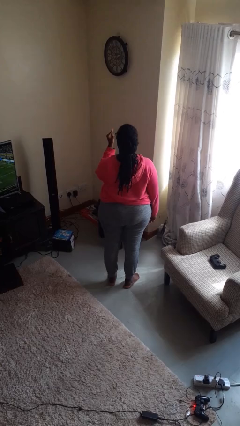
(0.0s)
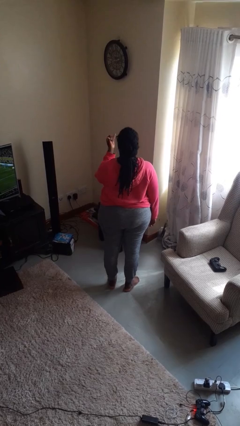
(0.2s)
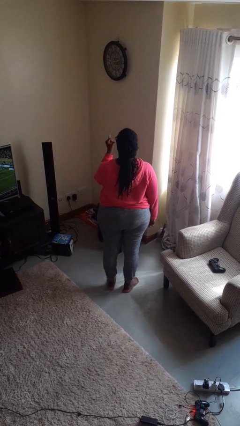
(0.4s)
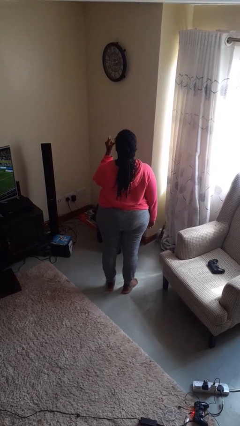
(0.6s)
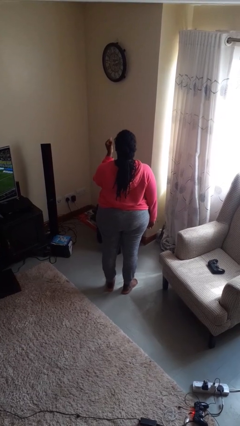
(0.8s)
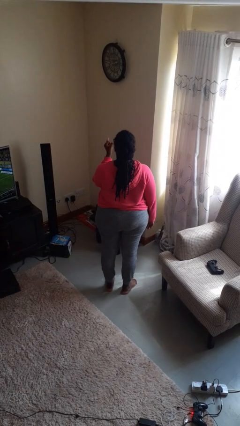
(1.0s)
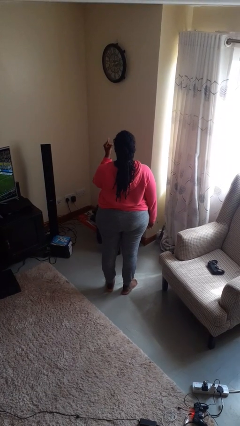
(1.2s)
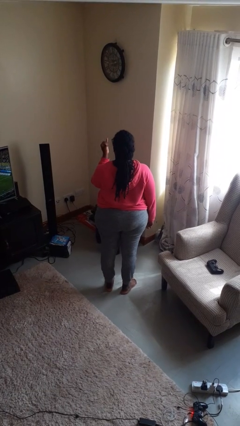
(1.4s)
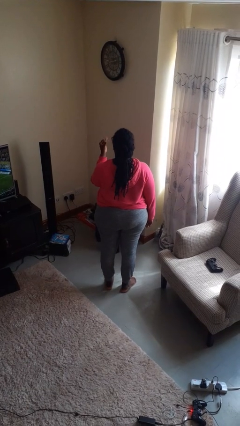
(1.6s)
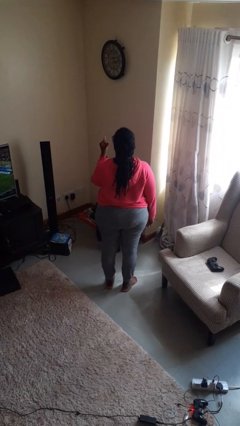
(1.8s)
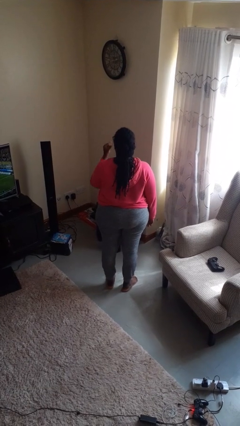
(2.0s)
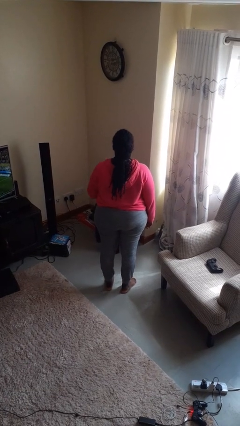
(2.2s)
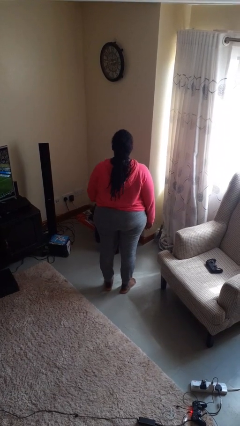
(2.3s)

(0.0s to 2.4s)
person gestures hang loose

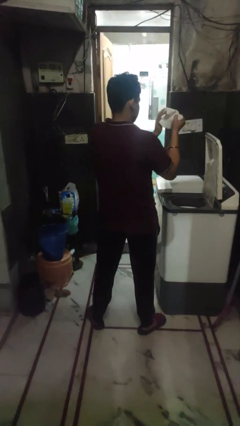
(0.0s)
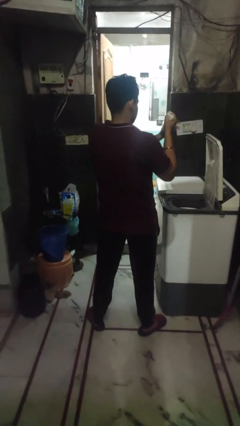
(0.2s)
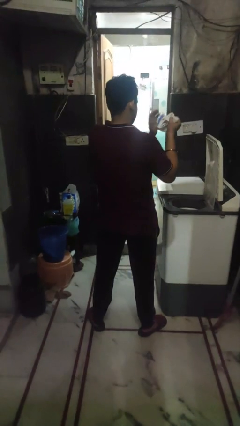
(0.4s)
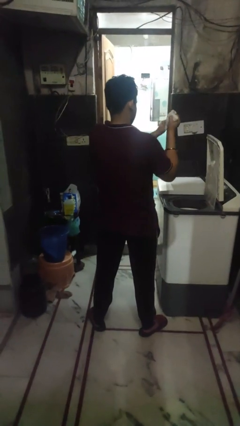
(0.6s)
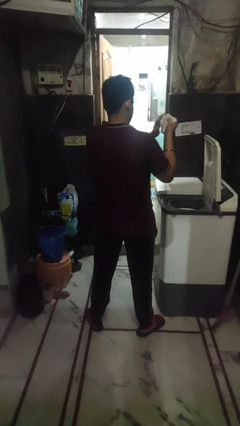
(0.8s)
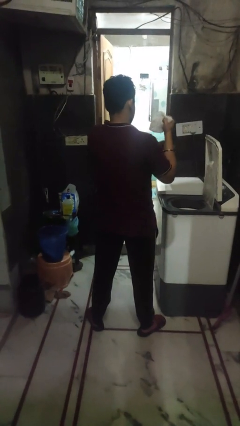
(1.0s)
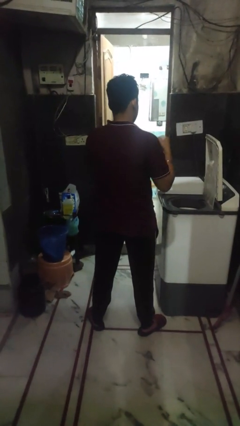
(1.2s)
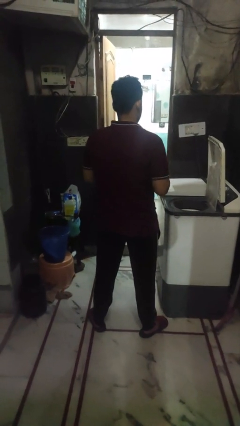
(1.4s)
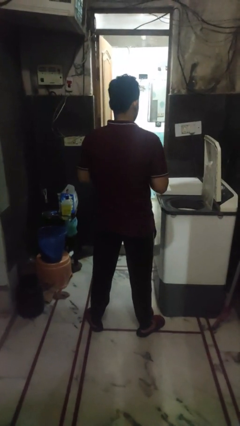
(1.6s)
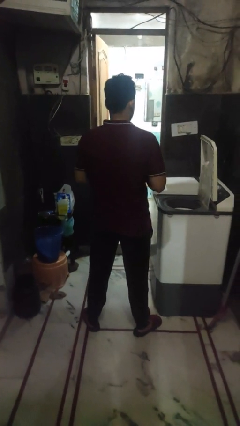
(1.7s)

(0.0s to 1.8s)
person cleans dryer lint trap

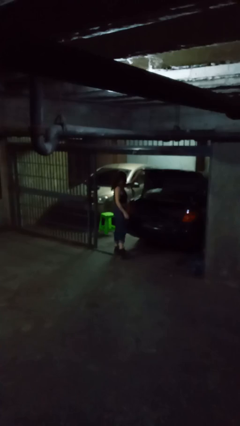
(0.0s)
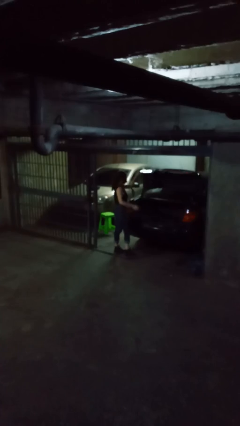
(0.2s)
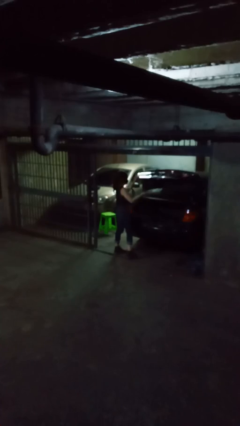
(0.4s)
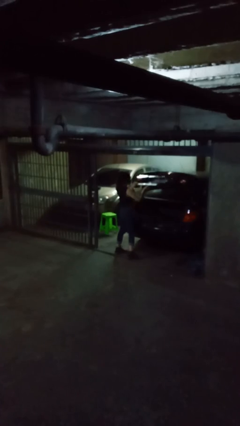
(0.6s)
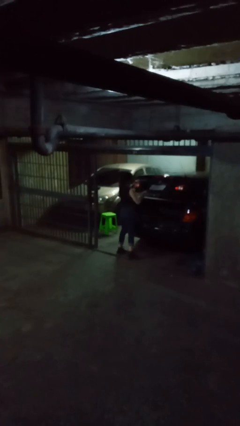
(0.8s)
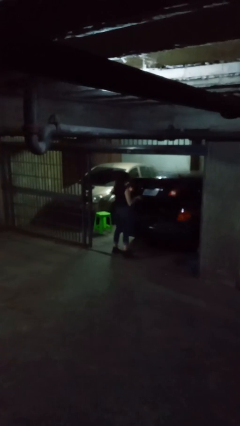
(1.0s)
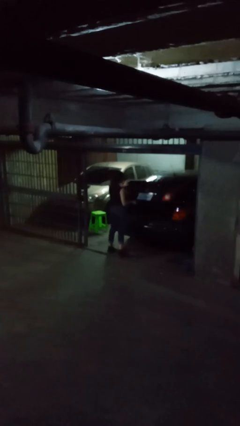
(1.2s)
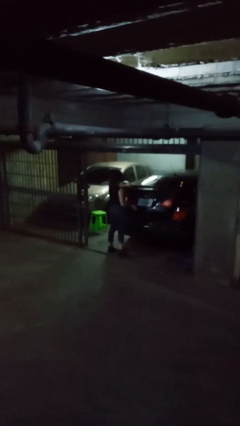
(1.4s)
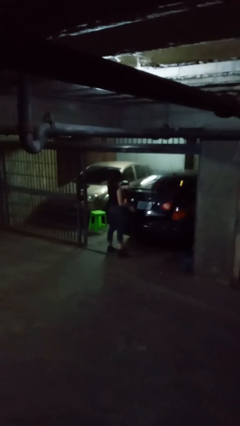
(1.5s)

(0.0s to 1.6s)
person closes car trunk

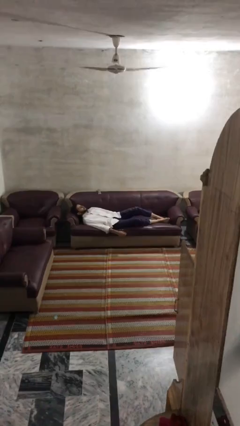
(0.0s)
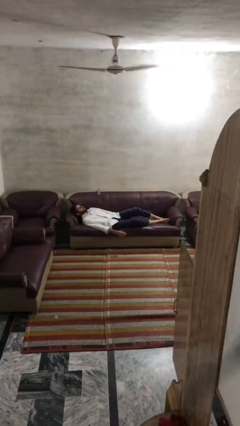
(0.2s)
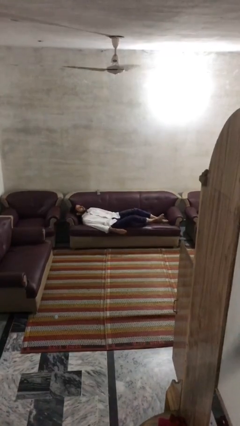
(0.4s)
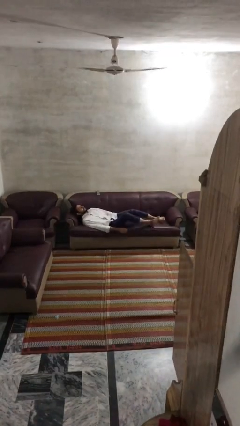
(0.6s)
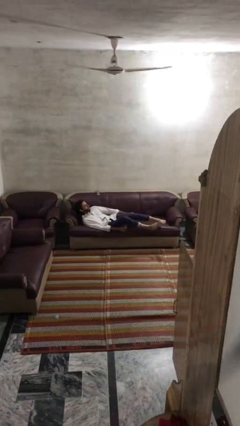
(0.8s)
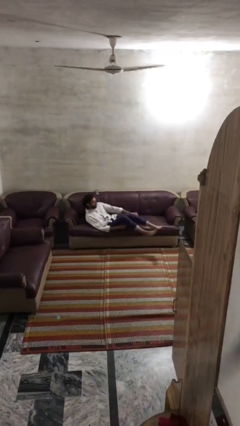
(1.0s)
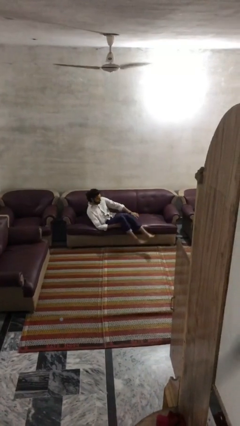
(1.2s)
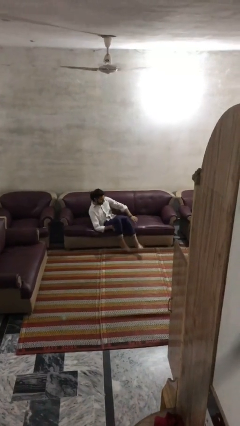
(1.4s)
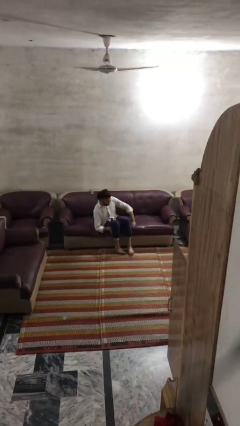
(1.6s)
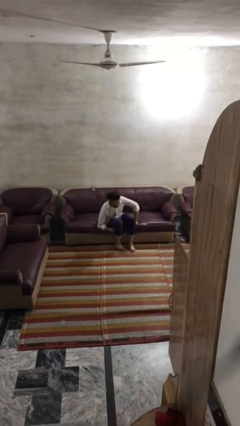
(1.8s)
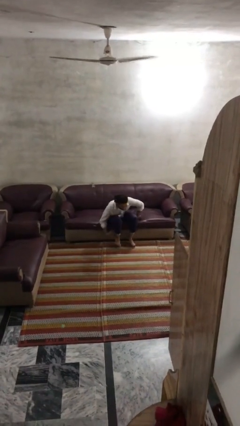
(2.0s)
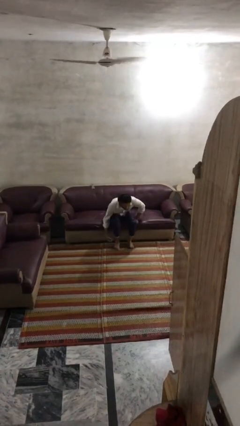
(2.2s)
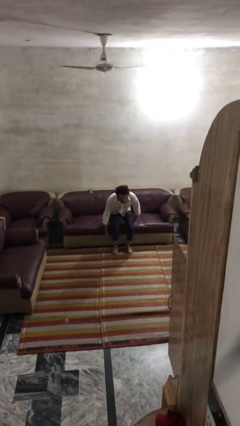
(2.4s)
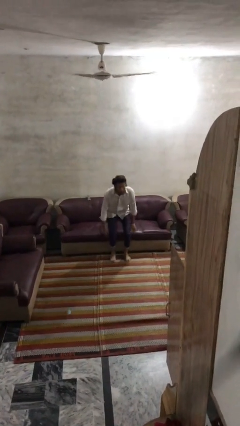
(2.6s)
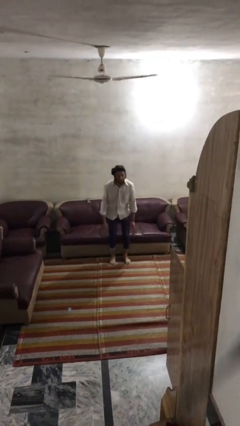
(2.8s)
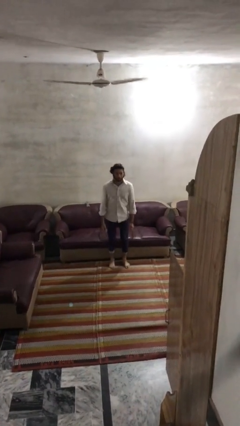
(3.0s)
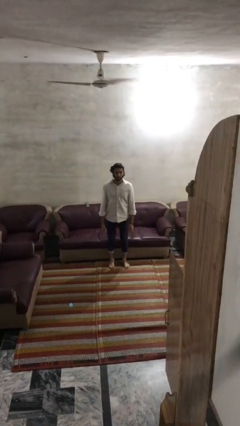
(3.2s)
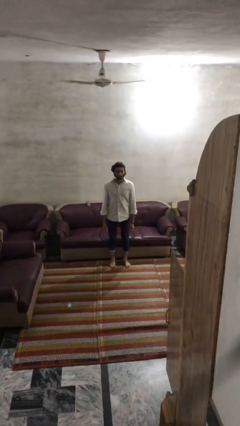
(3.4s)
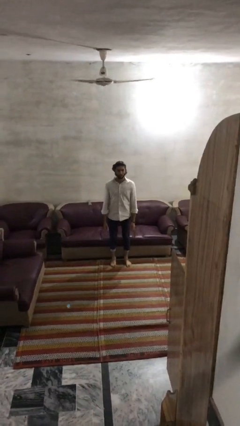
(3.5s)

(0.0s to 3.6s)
person stands up

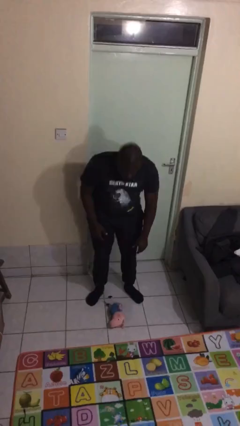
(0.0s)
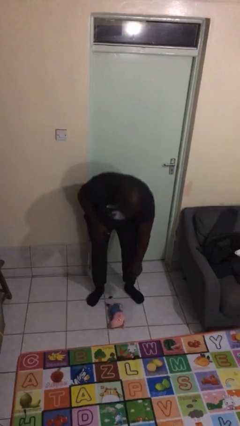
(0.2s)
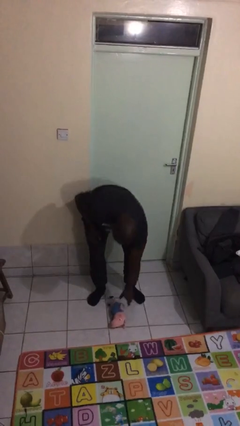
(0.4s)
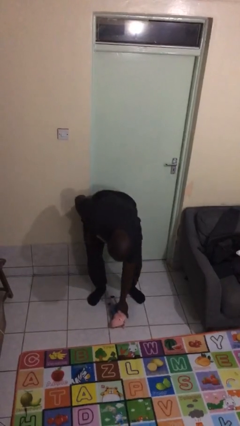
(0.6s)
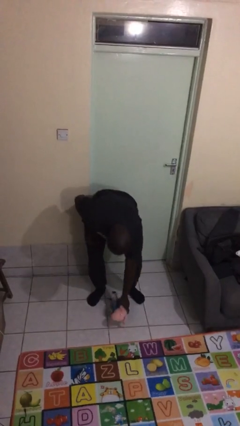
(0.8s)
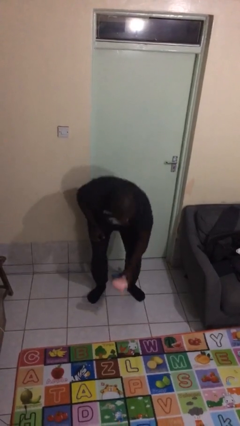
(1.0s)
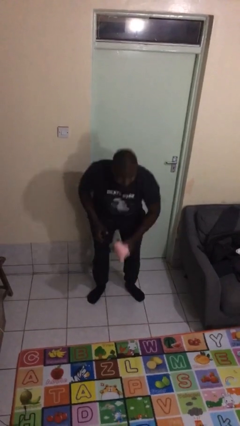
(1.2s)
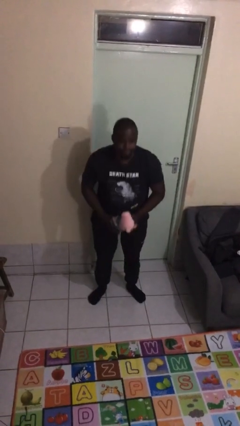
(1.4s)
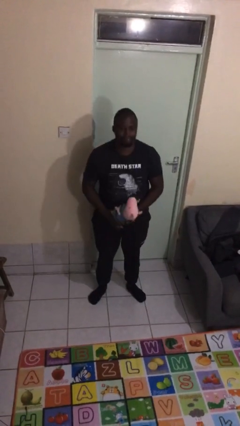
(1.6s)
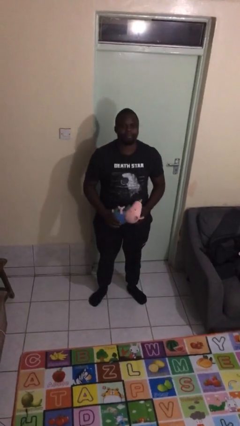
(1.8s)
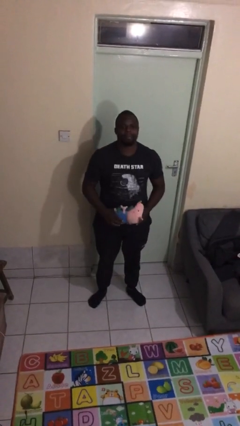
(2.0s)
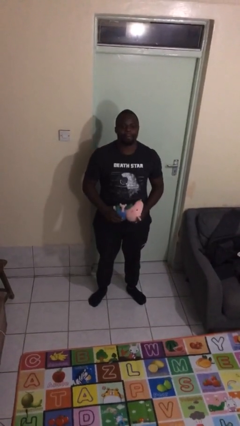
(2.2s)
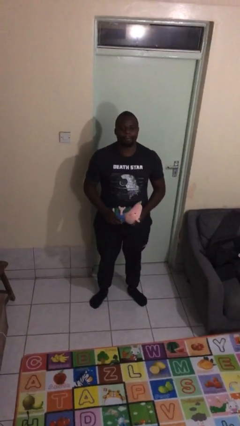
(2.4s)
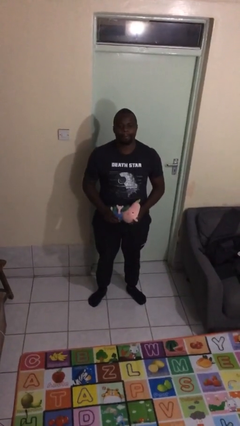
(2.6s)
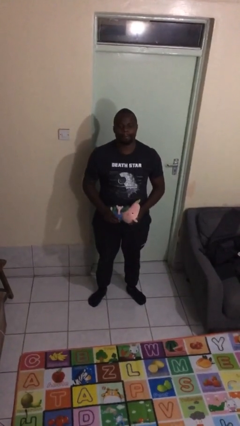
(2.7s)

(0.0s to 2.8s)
person picks up object from floor

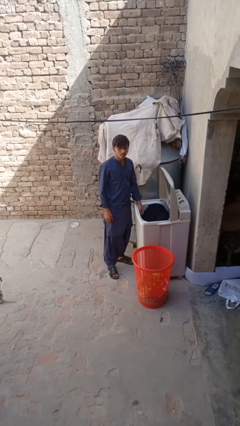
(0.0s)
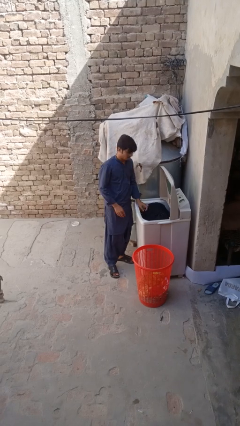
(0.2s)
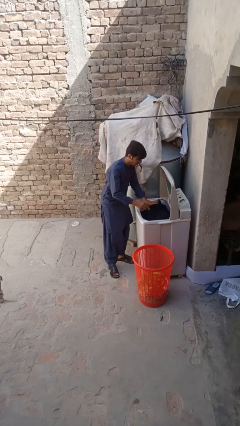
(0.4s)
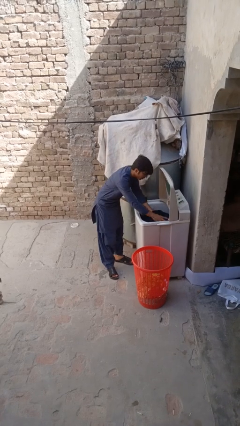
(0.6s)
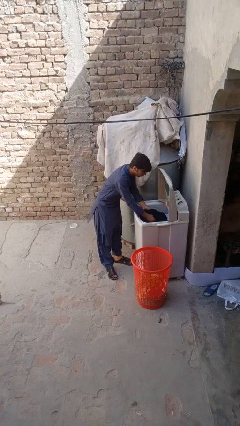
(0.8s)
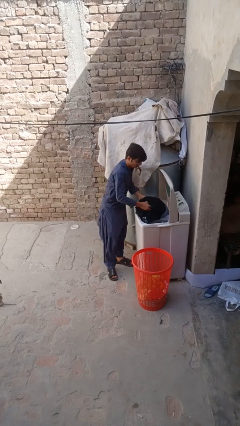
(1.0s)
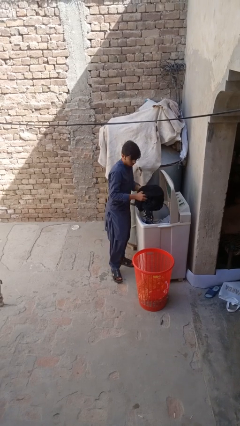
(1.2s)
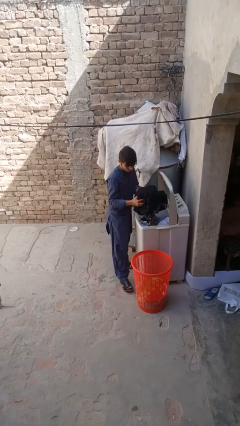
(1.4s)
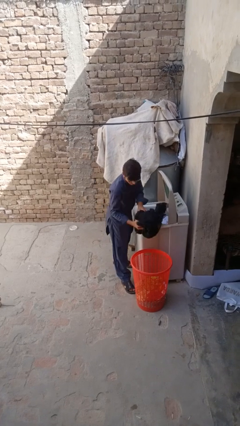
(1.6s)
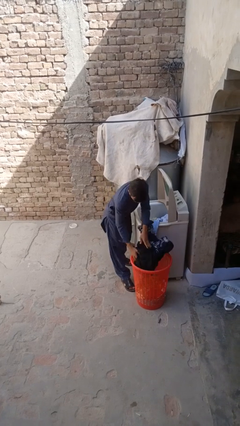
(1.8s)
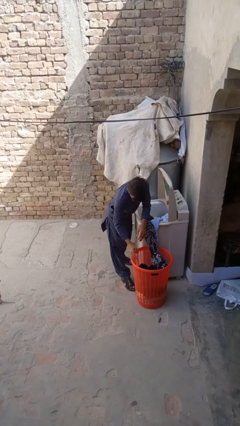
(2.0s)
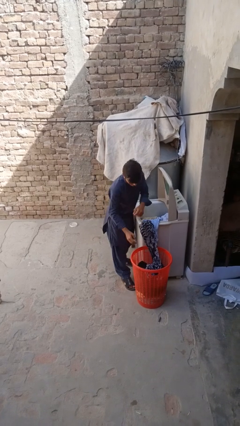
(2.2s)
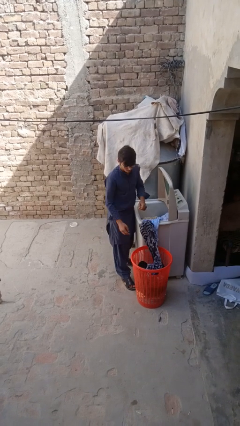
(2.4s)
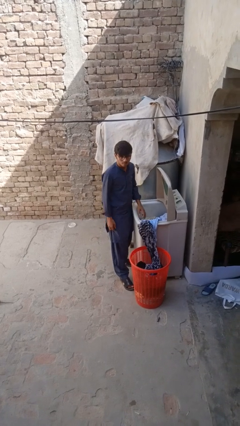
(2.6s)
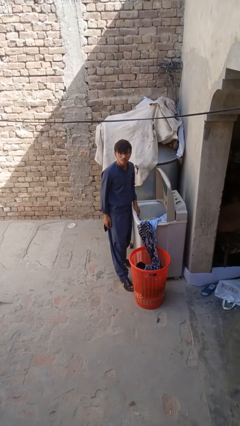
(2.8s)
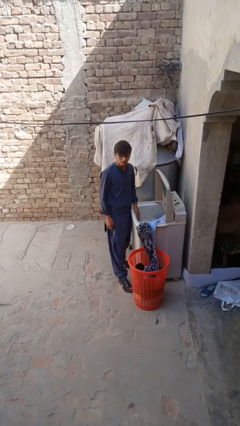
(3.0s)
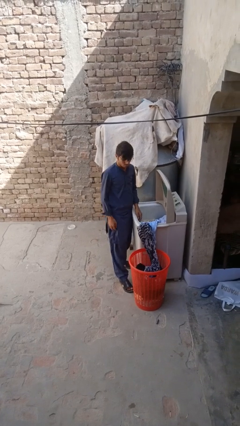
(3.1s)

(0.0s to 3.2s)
person unloads clotheswasher

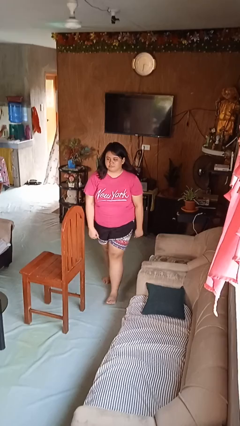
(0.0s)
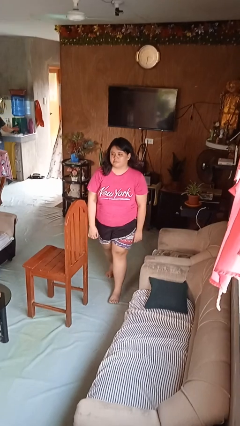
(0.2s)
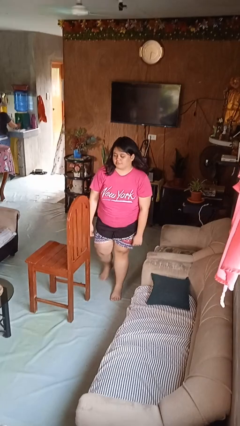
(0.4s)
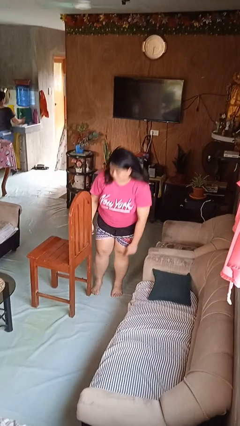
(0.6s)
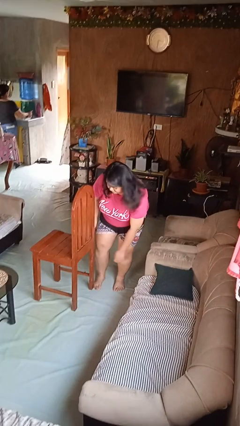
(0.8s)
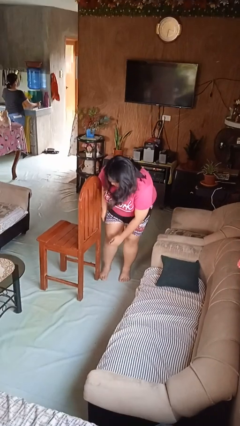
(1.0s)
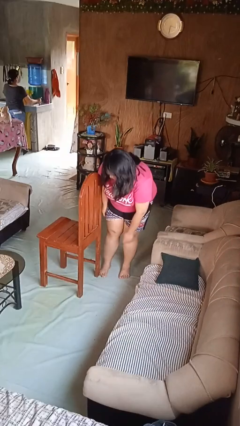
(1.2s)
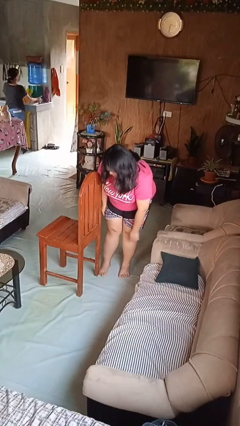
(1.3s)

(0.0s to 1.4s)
person stubs toe

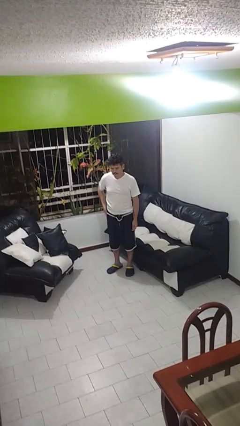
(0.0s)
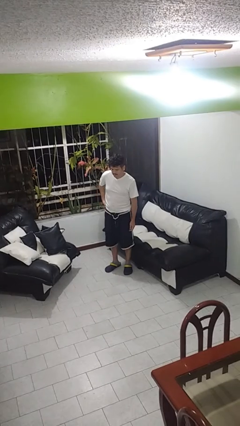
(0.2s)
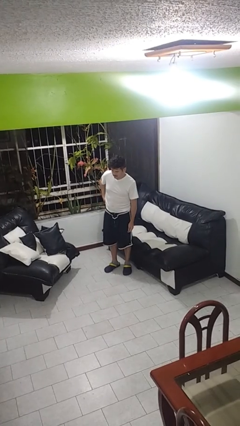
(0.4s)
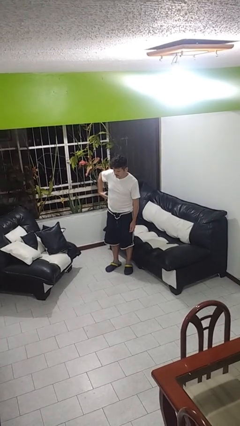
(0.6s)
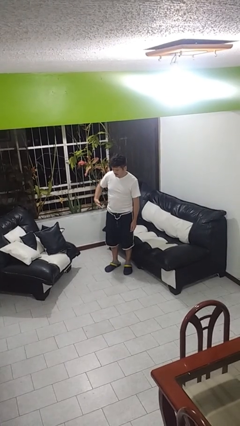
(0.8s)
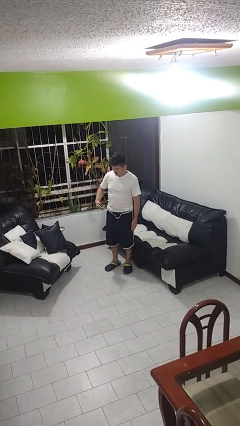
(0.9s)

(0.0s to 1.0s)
person takes phone from pocket
